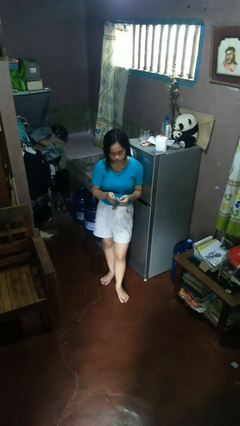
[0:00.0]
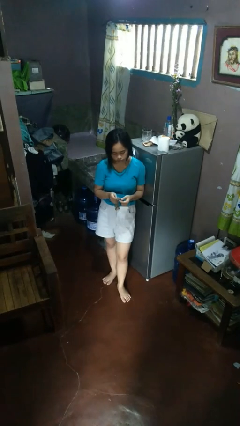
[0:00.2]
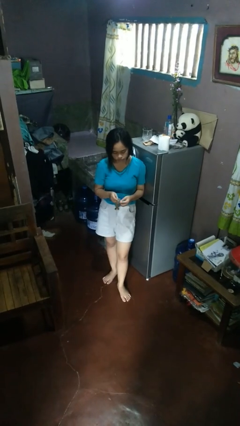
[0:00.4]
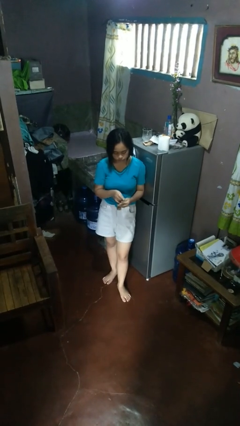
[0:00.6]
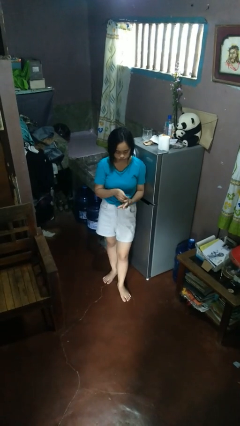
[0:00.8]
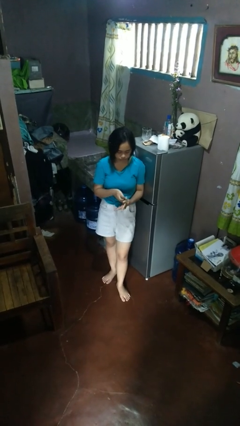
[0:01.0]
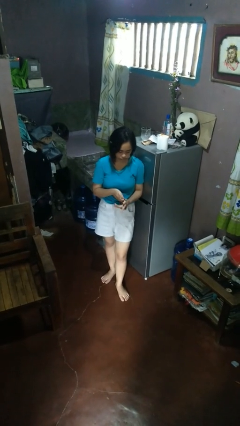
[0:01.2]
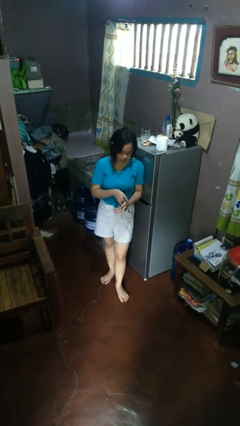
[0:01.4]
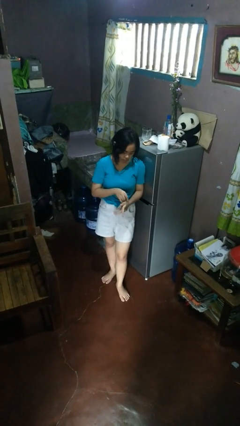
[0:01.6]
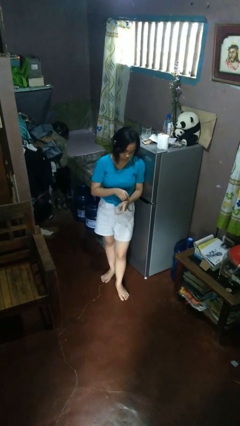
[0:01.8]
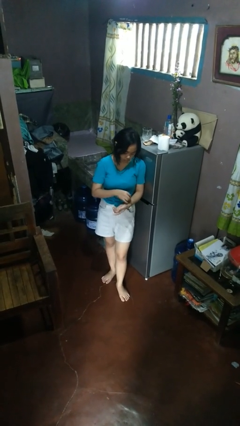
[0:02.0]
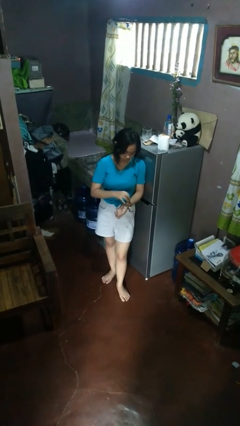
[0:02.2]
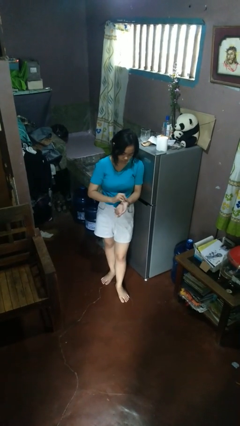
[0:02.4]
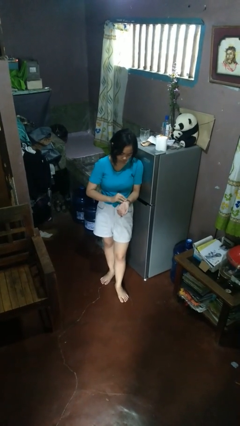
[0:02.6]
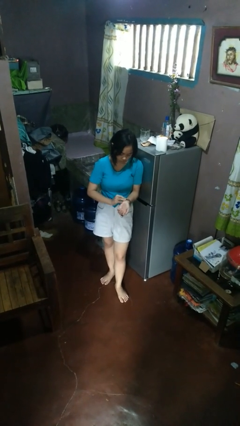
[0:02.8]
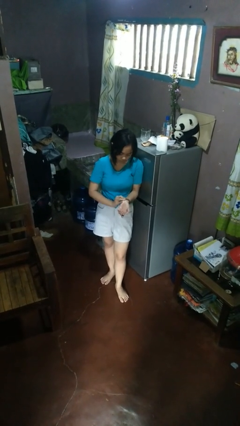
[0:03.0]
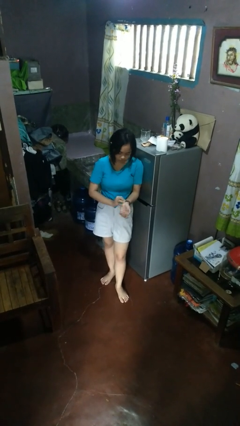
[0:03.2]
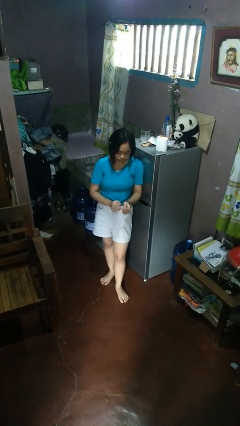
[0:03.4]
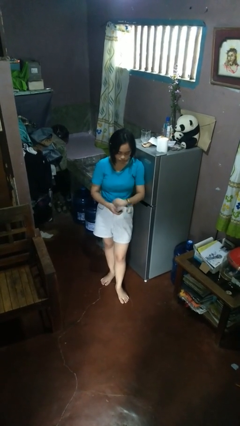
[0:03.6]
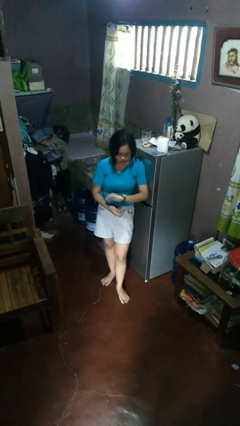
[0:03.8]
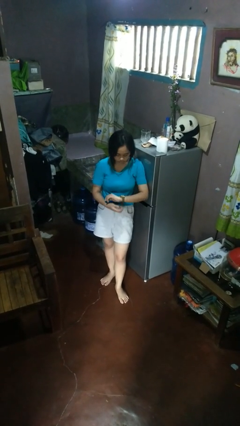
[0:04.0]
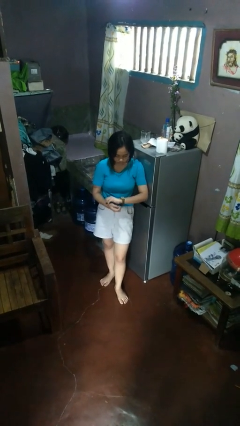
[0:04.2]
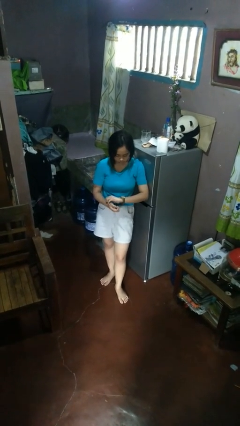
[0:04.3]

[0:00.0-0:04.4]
person puts on wristwatch

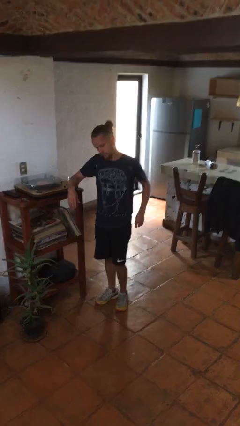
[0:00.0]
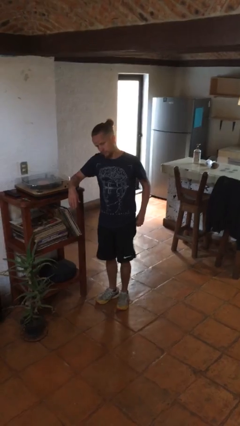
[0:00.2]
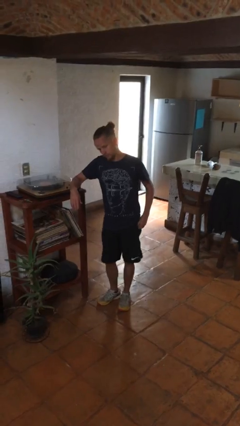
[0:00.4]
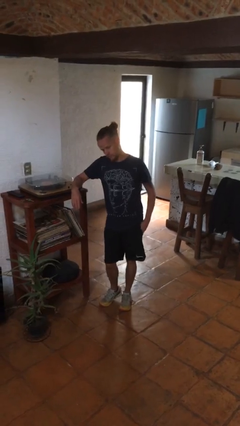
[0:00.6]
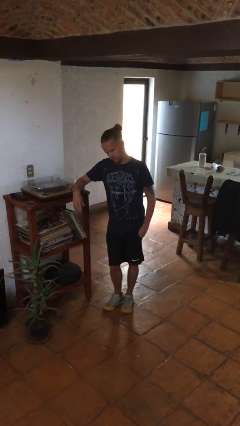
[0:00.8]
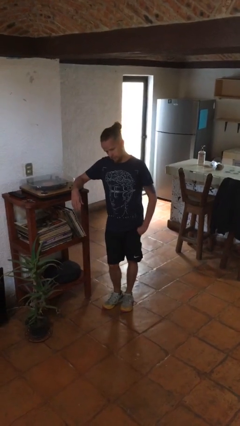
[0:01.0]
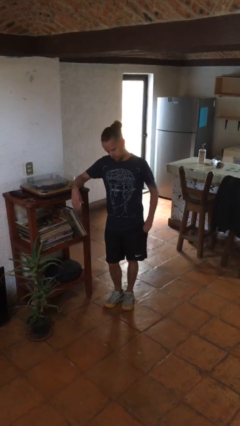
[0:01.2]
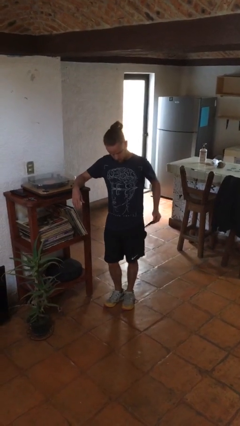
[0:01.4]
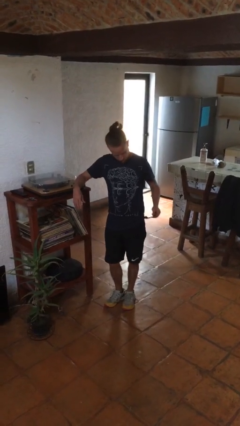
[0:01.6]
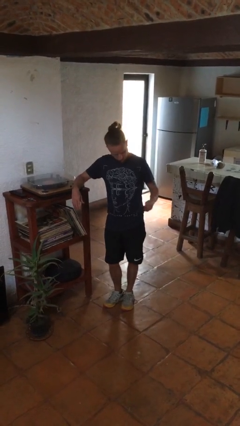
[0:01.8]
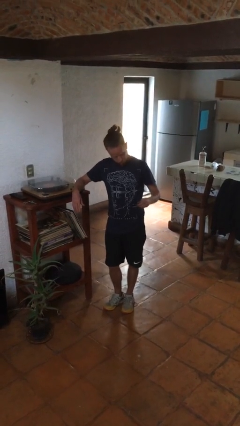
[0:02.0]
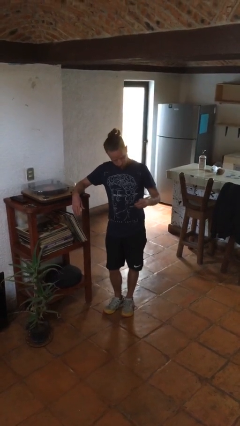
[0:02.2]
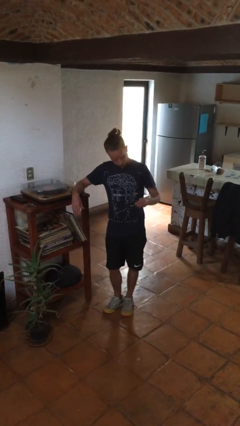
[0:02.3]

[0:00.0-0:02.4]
person takes phone from pocket

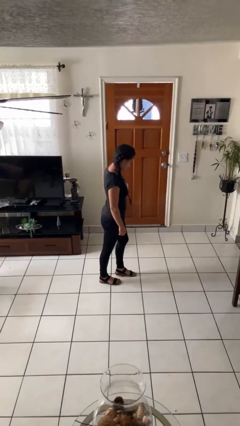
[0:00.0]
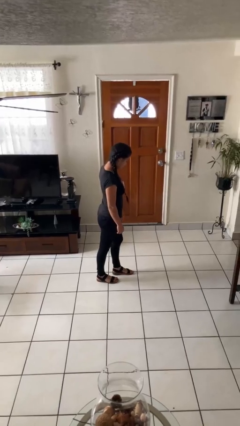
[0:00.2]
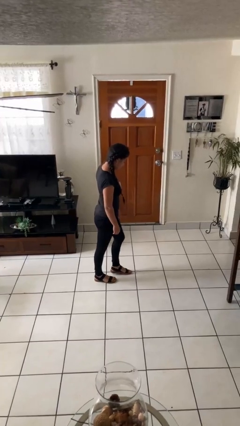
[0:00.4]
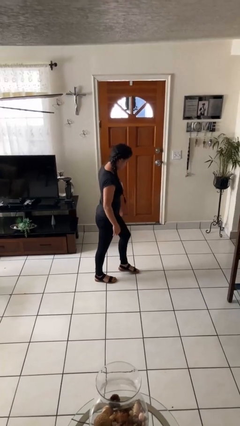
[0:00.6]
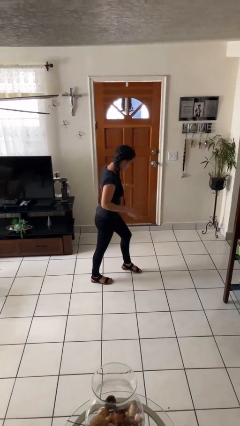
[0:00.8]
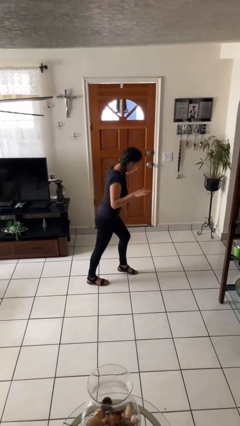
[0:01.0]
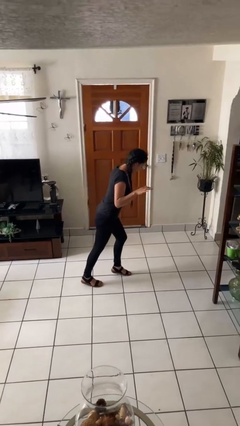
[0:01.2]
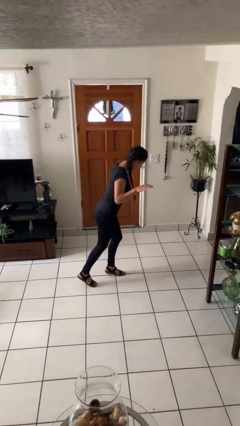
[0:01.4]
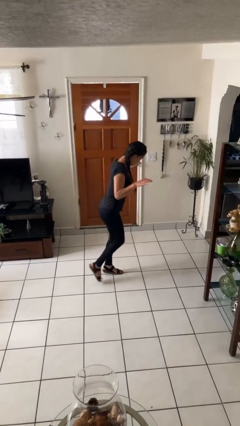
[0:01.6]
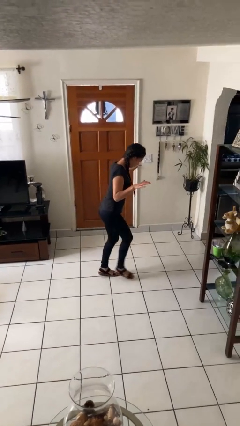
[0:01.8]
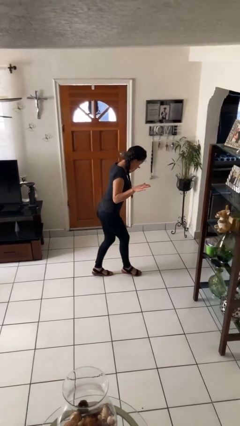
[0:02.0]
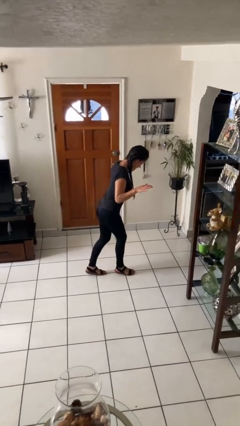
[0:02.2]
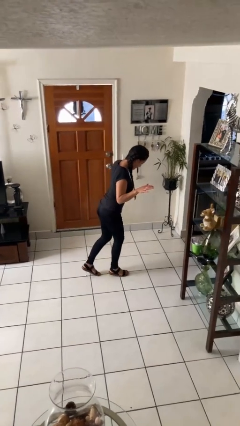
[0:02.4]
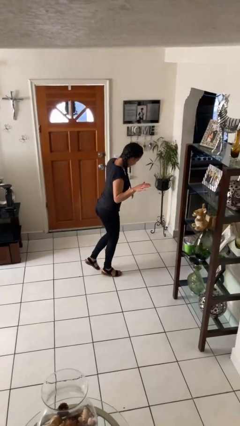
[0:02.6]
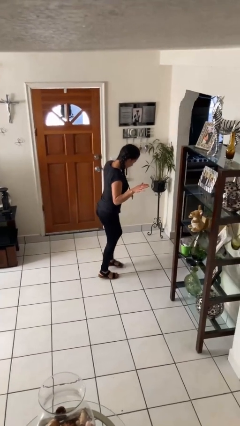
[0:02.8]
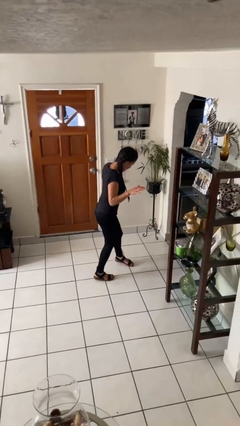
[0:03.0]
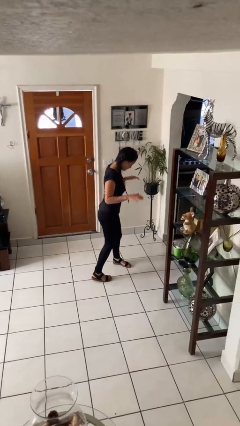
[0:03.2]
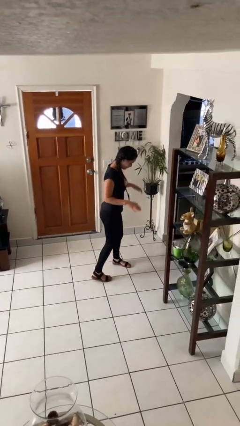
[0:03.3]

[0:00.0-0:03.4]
person walks tiptoe

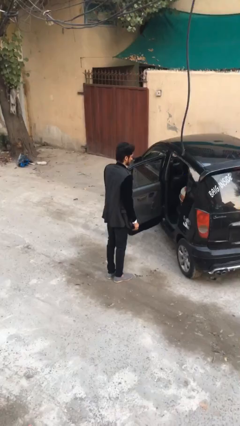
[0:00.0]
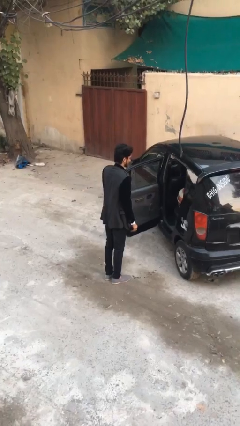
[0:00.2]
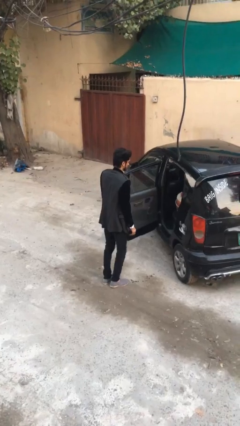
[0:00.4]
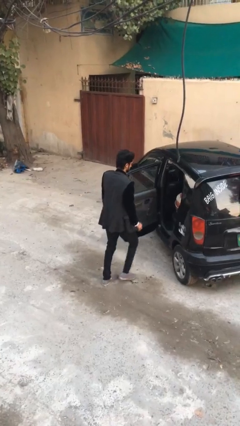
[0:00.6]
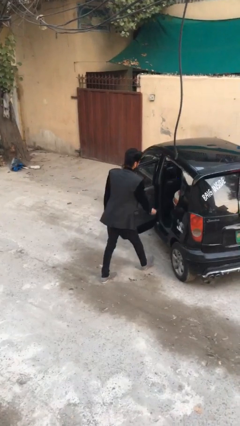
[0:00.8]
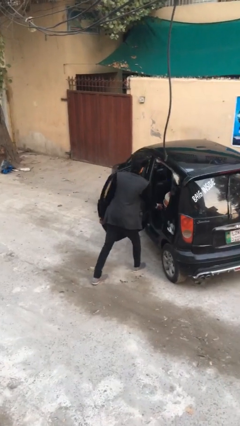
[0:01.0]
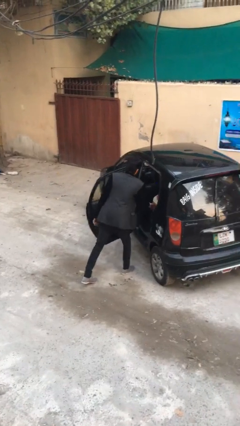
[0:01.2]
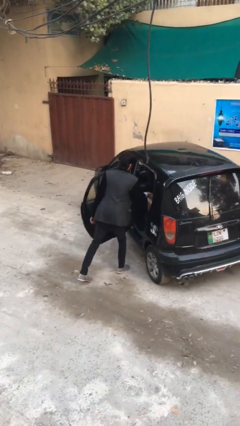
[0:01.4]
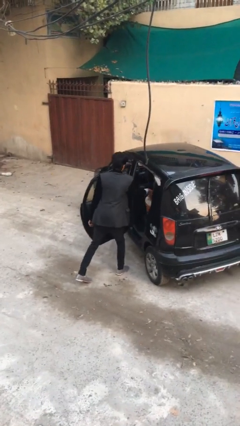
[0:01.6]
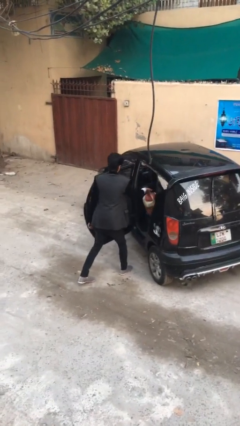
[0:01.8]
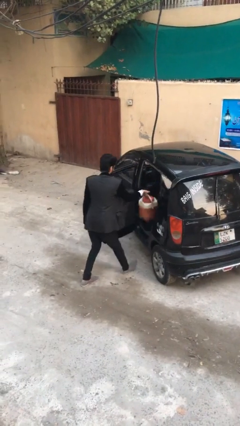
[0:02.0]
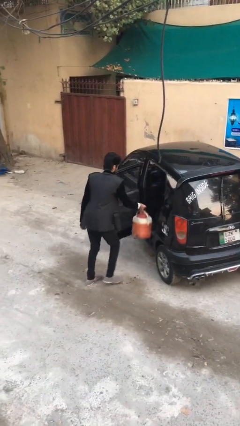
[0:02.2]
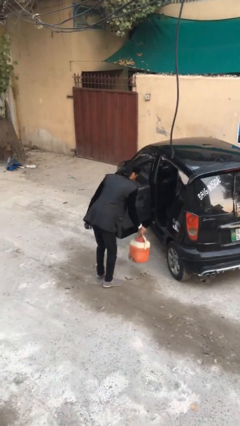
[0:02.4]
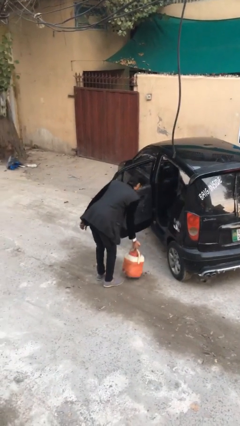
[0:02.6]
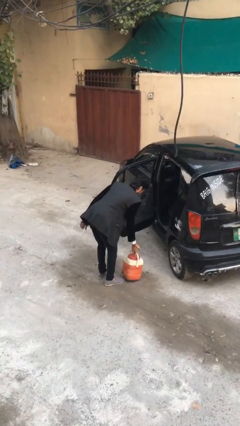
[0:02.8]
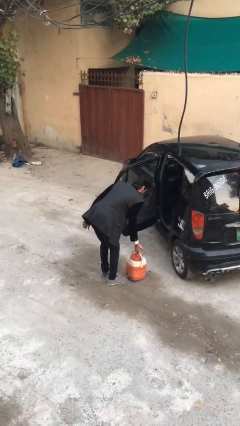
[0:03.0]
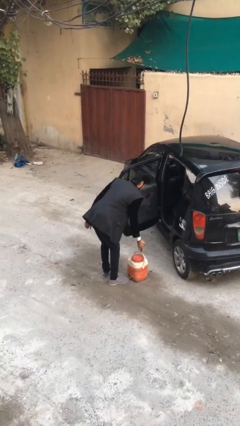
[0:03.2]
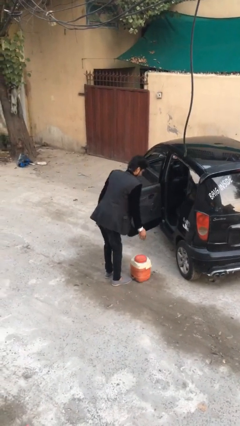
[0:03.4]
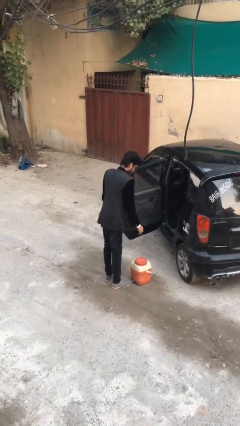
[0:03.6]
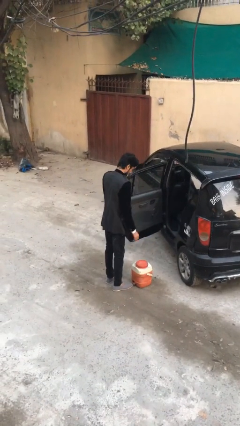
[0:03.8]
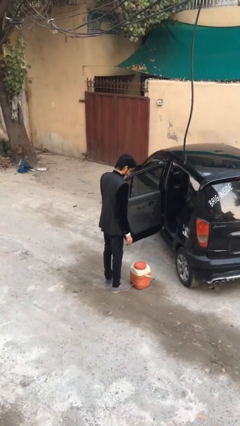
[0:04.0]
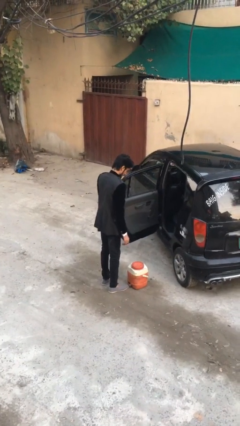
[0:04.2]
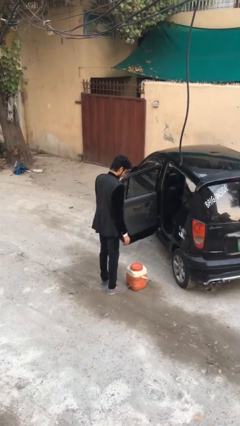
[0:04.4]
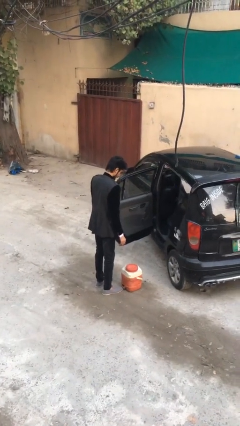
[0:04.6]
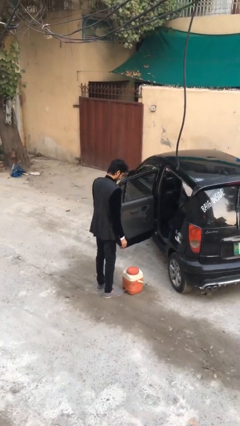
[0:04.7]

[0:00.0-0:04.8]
person unloads car

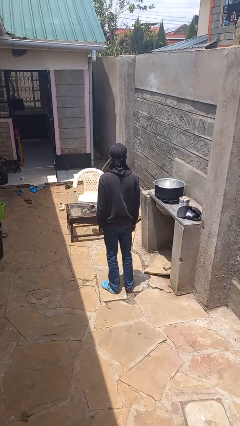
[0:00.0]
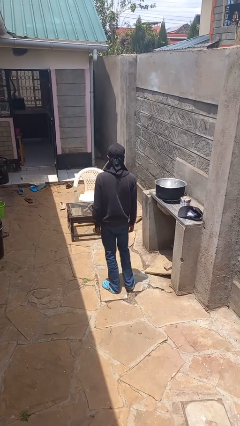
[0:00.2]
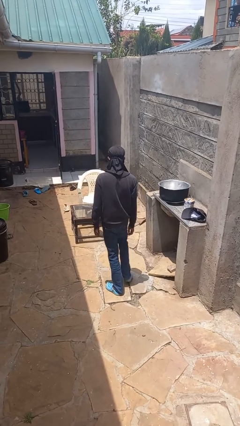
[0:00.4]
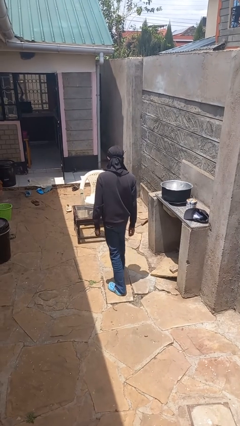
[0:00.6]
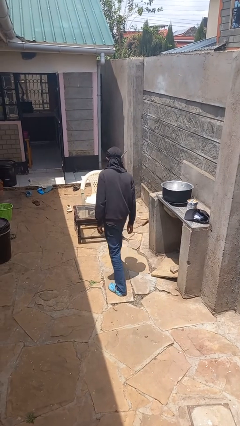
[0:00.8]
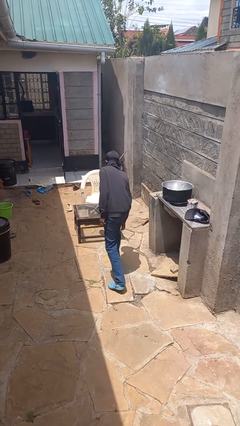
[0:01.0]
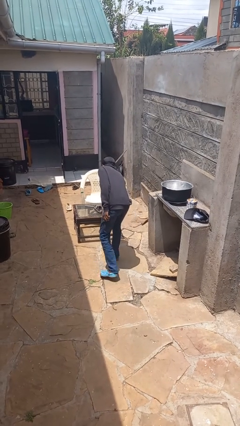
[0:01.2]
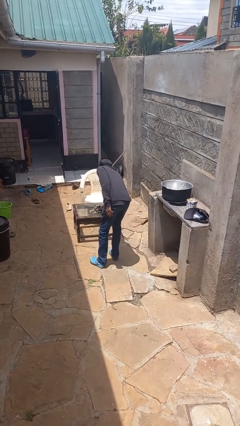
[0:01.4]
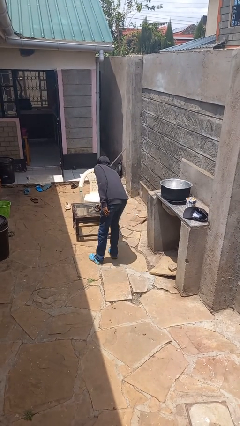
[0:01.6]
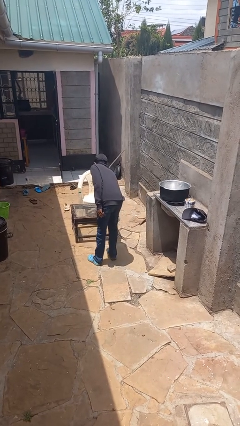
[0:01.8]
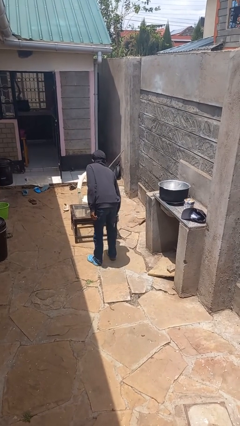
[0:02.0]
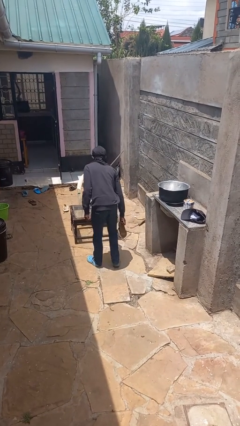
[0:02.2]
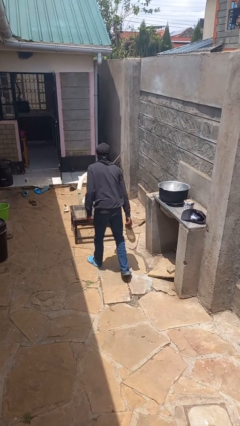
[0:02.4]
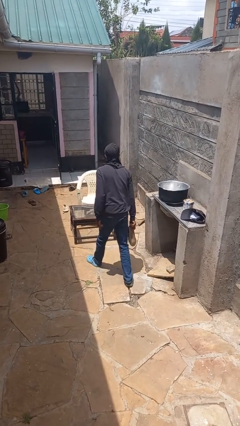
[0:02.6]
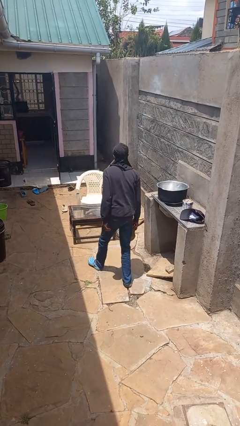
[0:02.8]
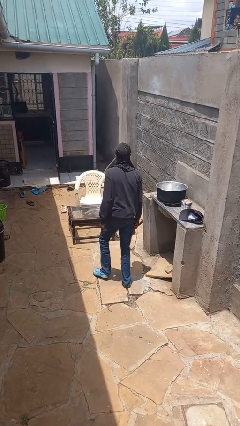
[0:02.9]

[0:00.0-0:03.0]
person picks up object from table
